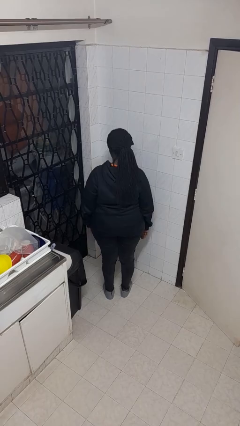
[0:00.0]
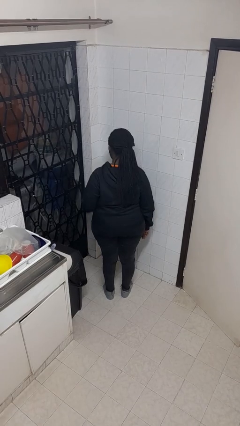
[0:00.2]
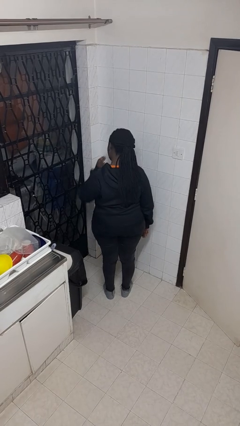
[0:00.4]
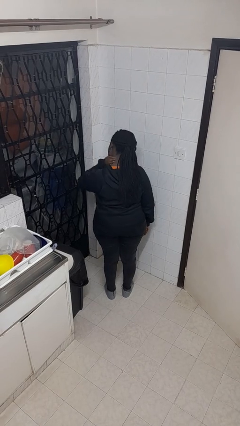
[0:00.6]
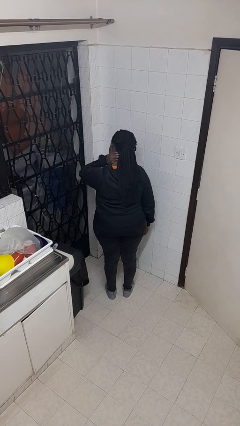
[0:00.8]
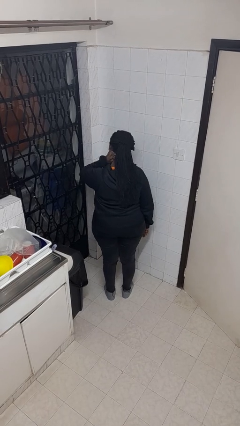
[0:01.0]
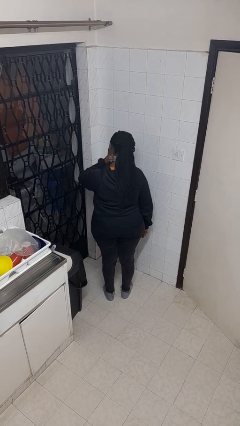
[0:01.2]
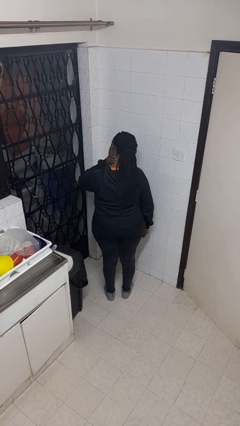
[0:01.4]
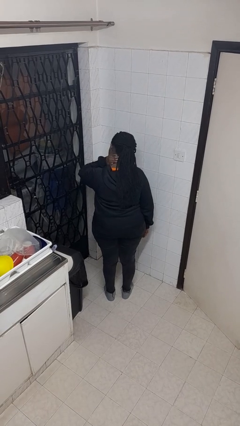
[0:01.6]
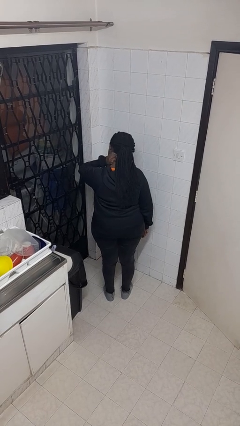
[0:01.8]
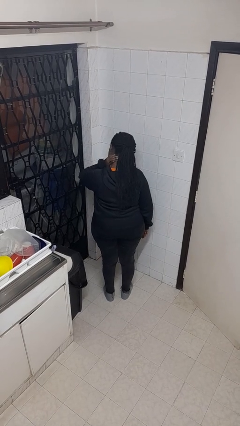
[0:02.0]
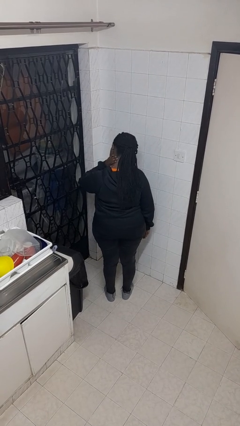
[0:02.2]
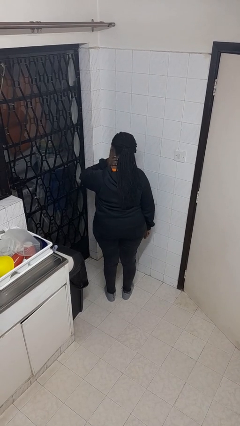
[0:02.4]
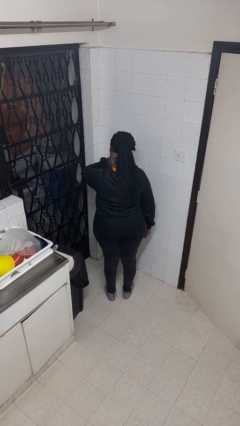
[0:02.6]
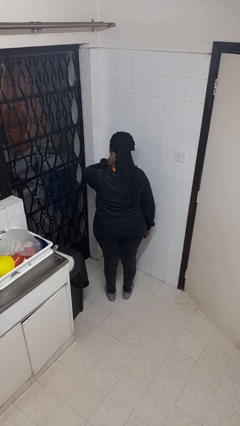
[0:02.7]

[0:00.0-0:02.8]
person rubs neck

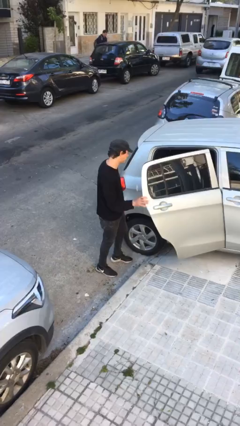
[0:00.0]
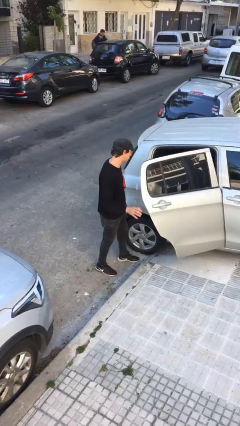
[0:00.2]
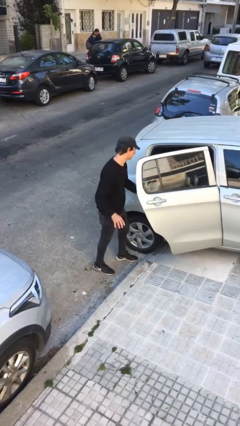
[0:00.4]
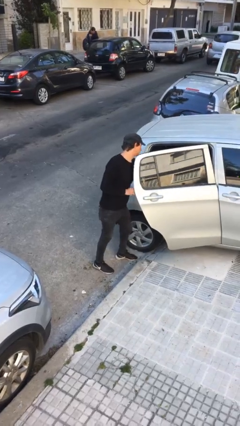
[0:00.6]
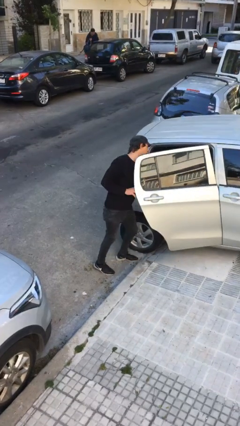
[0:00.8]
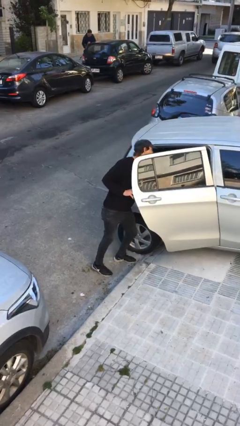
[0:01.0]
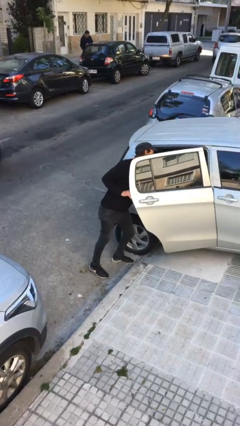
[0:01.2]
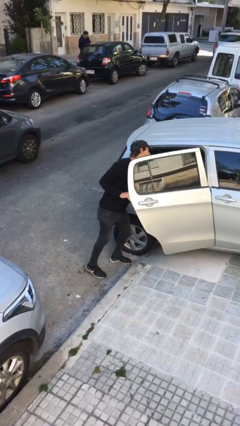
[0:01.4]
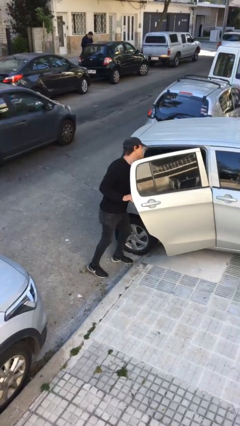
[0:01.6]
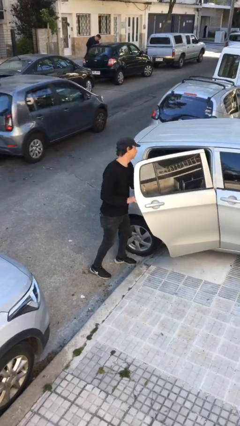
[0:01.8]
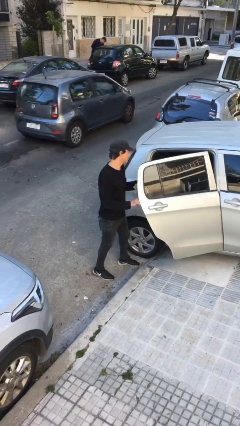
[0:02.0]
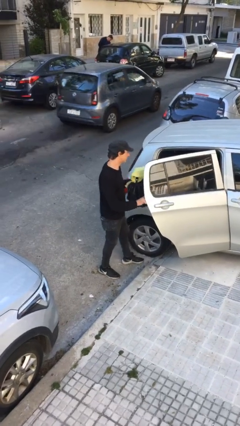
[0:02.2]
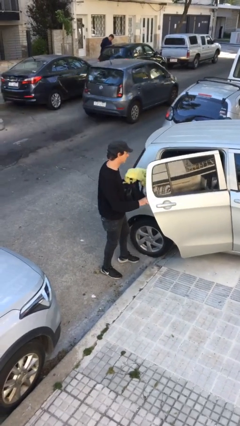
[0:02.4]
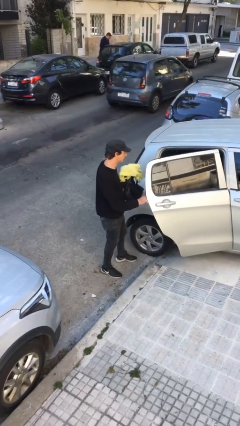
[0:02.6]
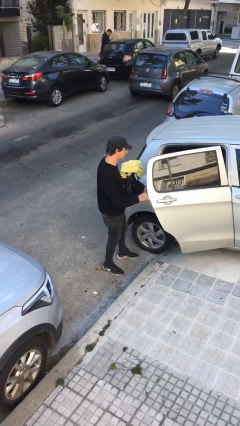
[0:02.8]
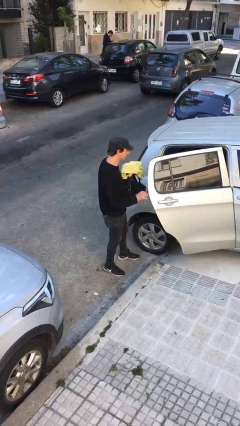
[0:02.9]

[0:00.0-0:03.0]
person unloads car

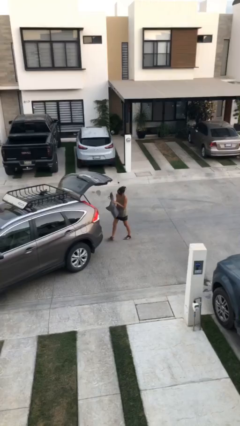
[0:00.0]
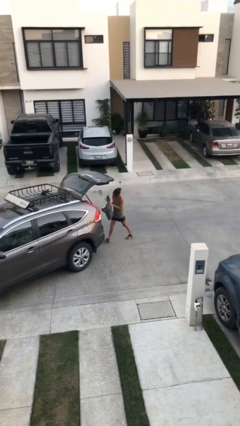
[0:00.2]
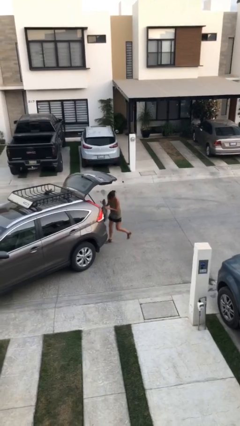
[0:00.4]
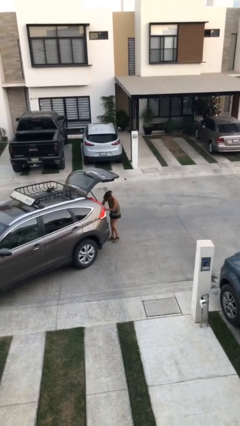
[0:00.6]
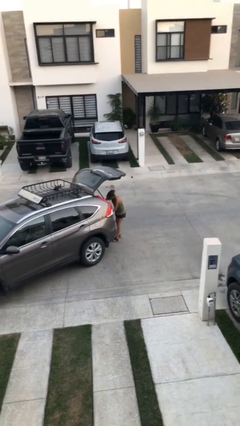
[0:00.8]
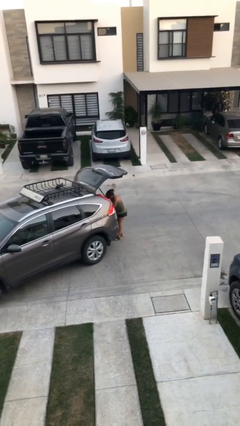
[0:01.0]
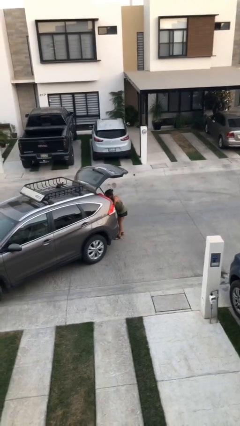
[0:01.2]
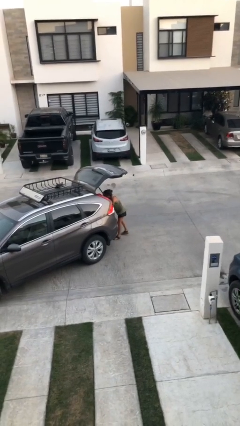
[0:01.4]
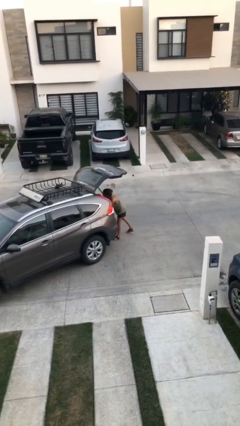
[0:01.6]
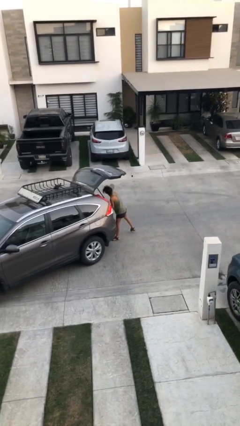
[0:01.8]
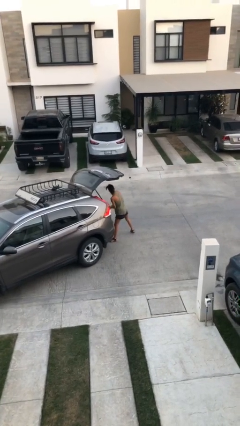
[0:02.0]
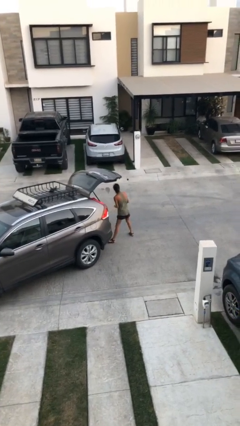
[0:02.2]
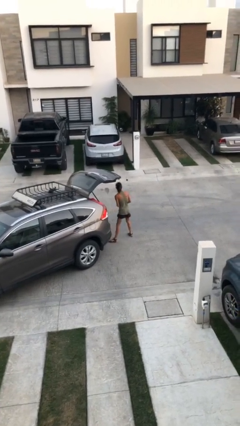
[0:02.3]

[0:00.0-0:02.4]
person loads car

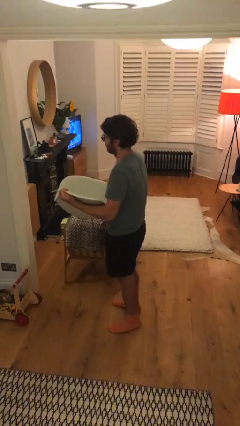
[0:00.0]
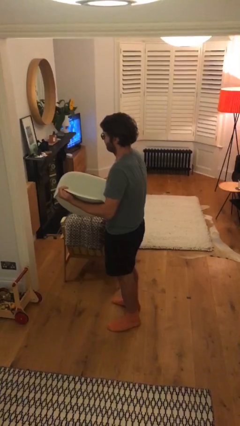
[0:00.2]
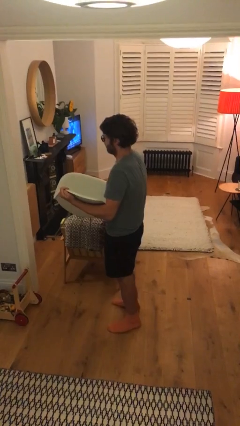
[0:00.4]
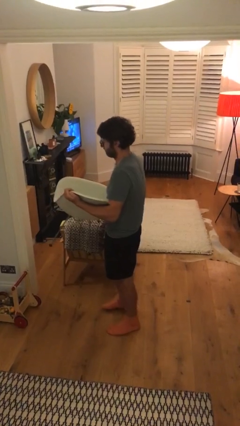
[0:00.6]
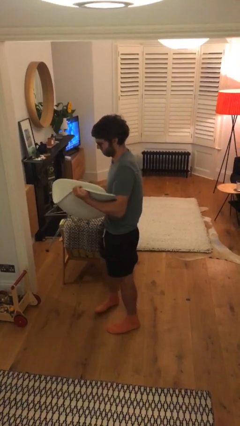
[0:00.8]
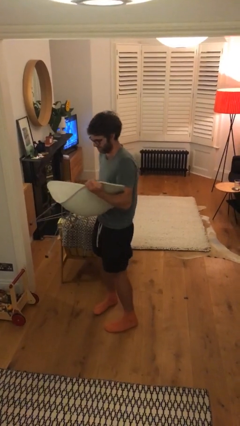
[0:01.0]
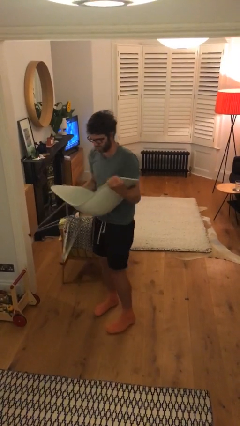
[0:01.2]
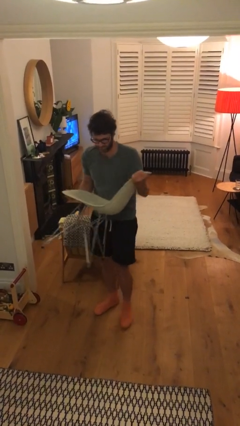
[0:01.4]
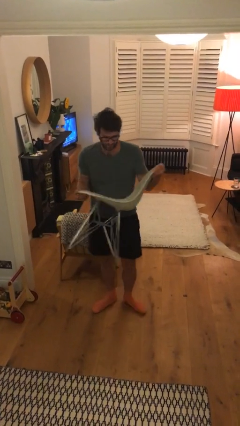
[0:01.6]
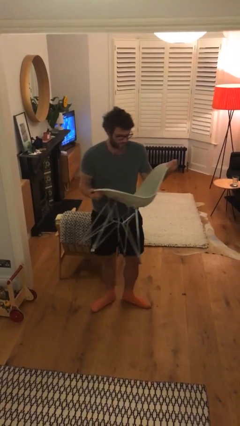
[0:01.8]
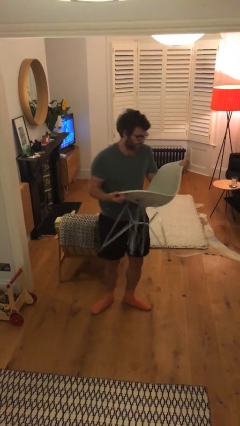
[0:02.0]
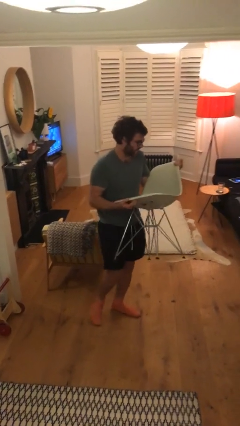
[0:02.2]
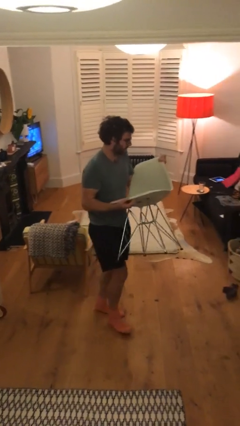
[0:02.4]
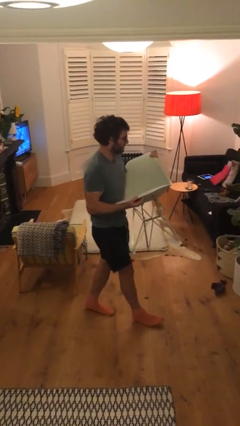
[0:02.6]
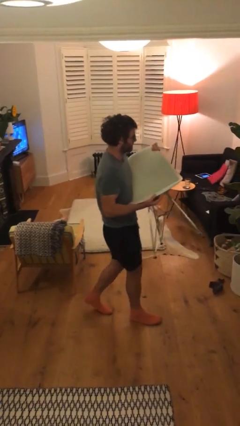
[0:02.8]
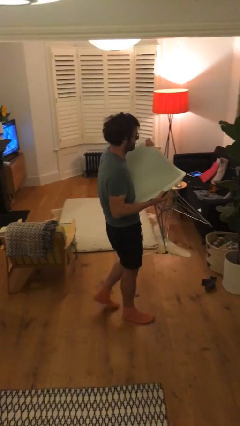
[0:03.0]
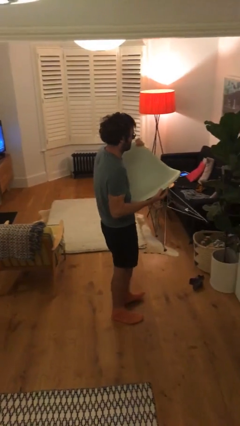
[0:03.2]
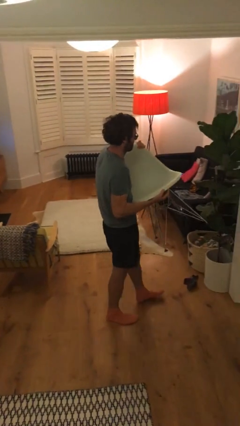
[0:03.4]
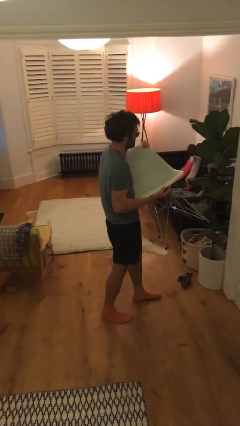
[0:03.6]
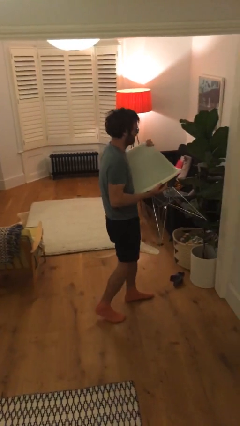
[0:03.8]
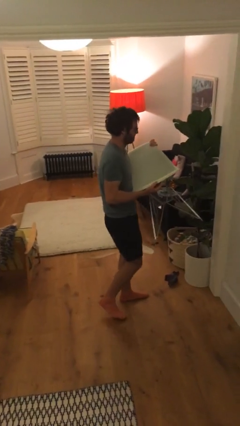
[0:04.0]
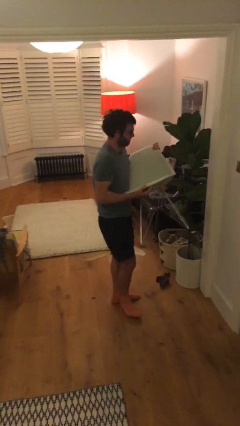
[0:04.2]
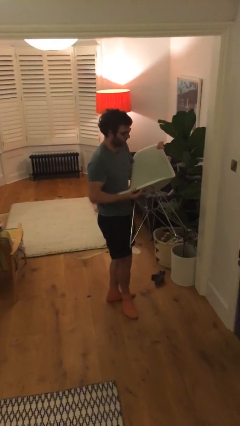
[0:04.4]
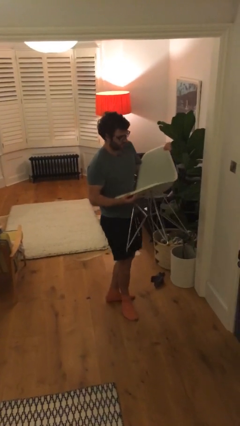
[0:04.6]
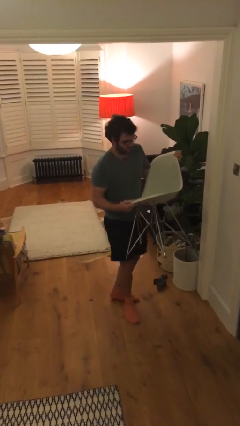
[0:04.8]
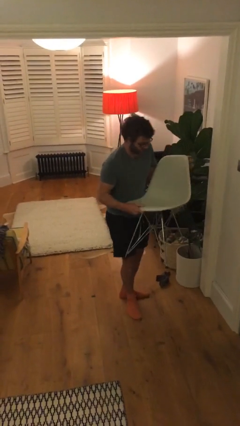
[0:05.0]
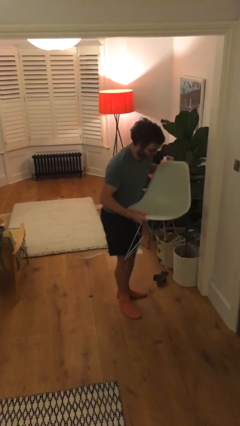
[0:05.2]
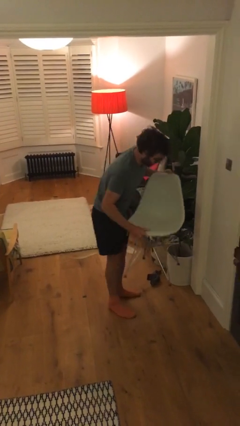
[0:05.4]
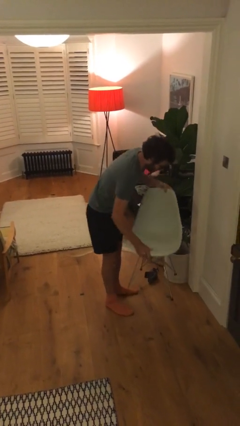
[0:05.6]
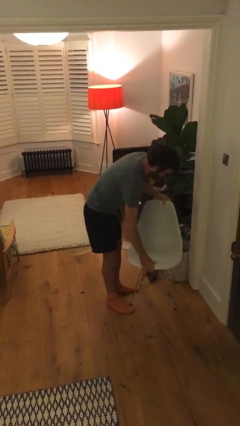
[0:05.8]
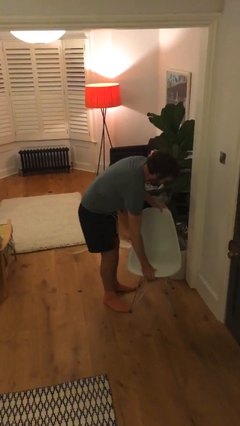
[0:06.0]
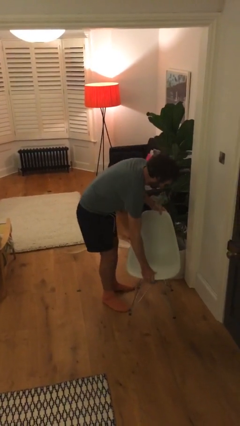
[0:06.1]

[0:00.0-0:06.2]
person carries heavy object

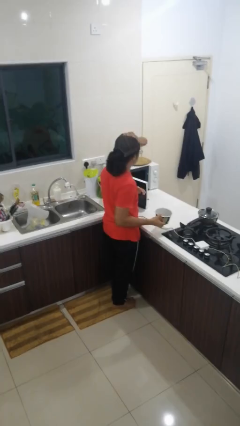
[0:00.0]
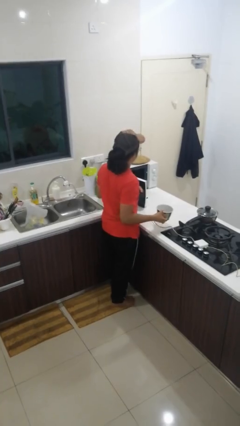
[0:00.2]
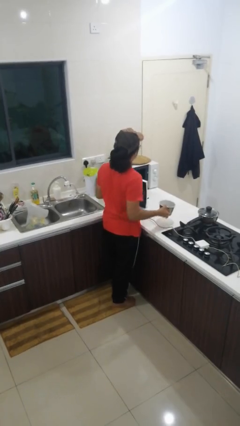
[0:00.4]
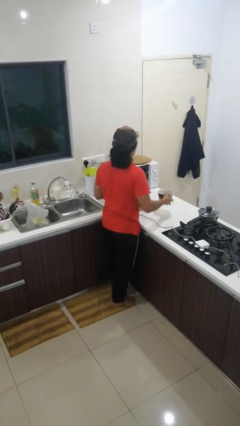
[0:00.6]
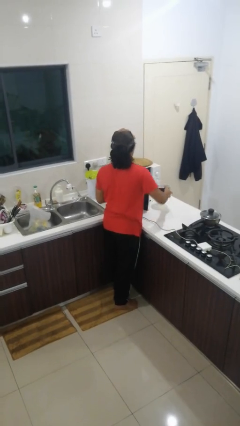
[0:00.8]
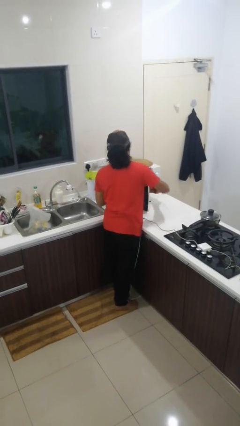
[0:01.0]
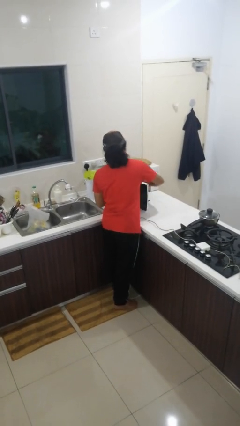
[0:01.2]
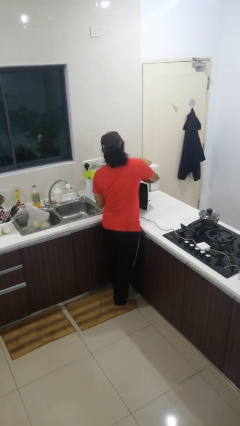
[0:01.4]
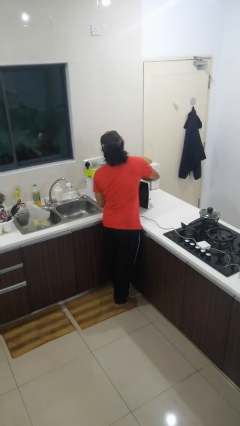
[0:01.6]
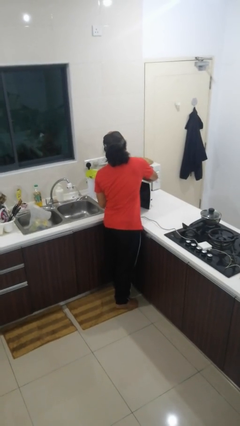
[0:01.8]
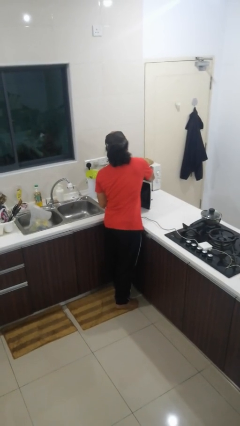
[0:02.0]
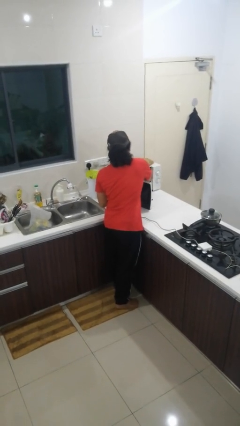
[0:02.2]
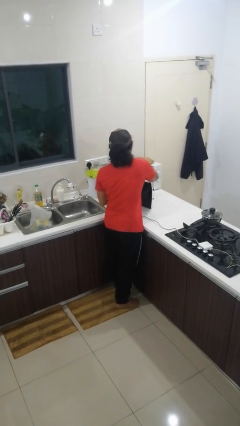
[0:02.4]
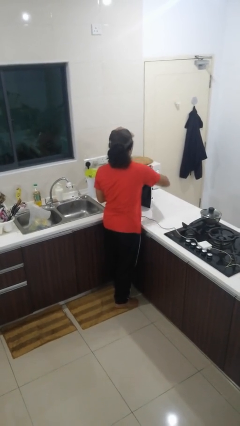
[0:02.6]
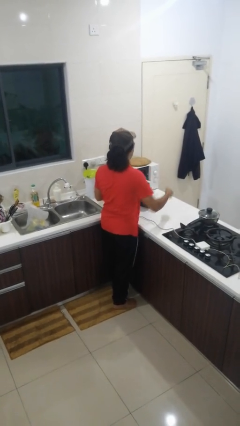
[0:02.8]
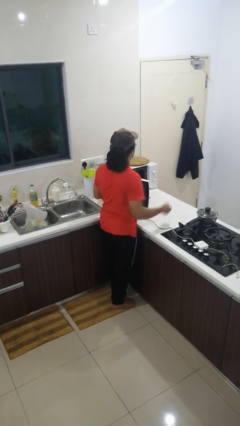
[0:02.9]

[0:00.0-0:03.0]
person puts object into microwave

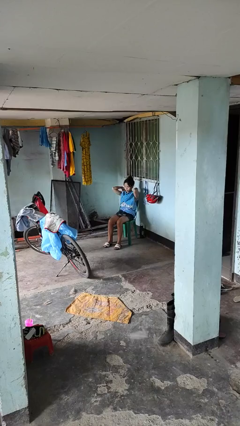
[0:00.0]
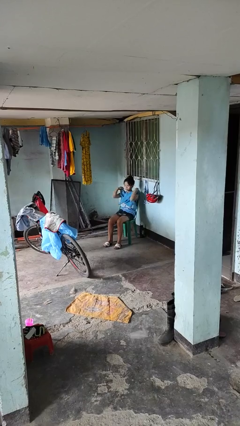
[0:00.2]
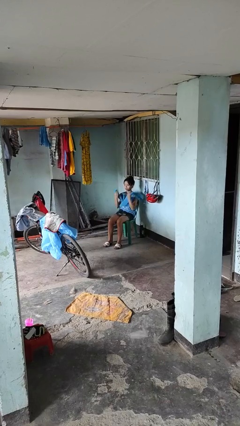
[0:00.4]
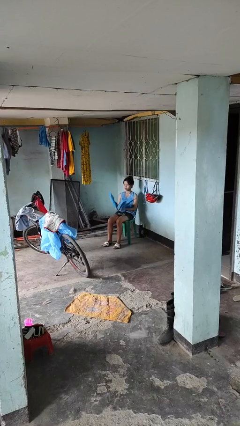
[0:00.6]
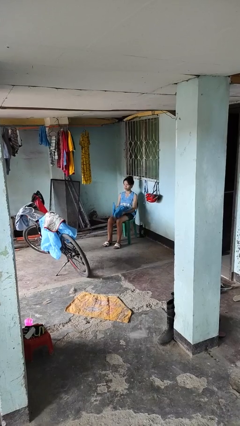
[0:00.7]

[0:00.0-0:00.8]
person takes off scarf
